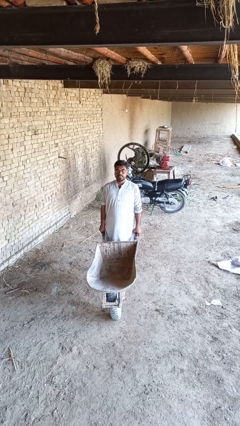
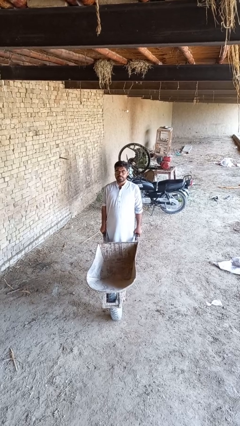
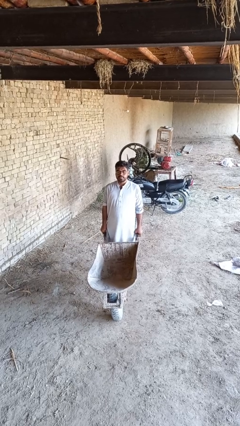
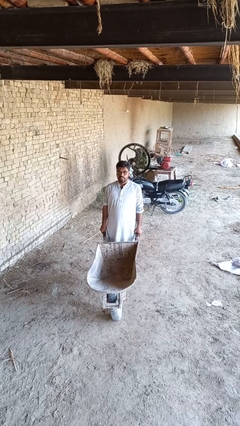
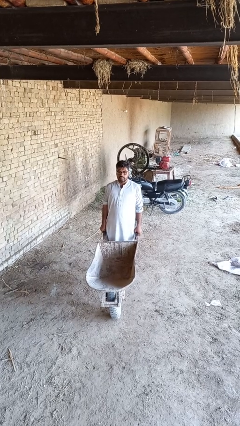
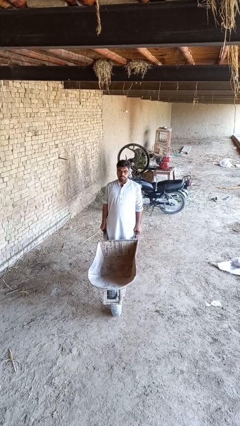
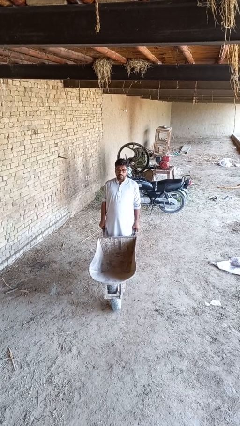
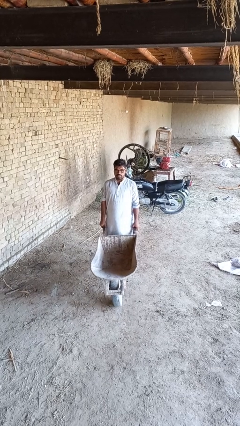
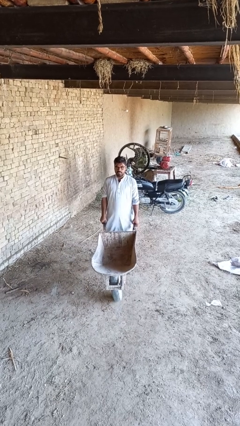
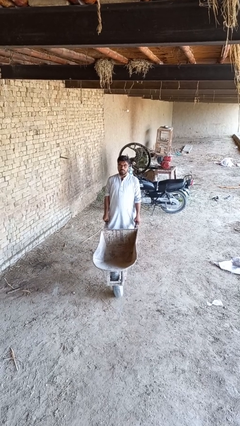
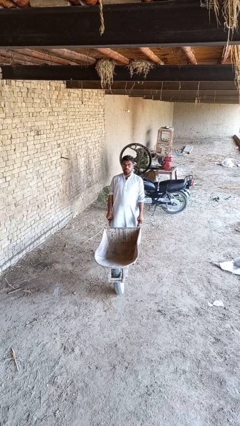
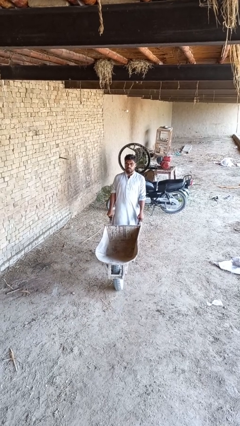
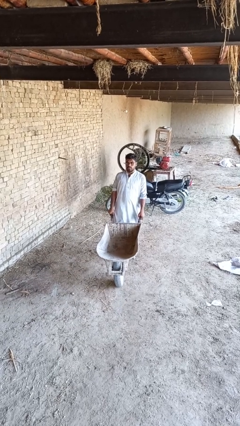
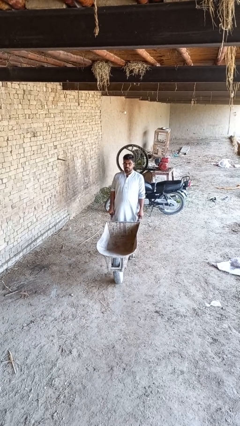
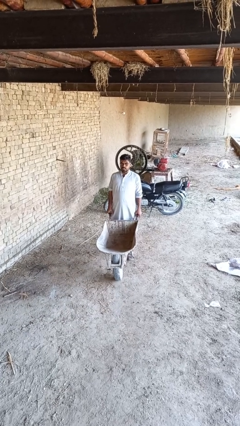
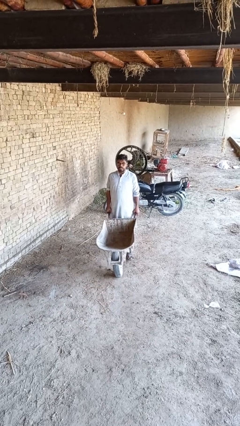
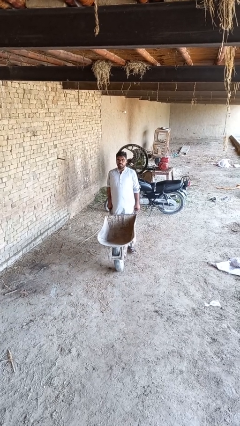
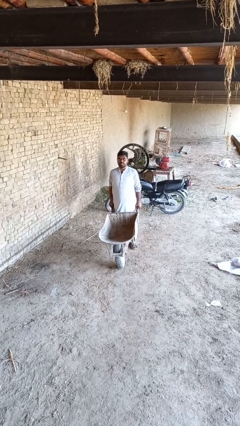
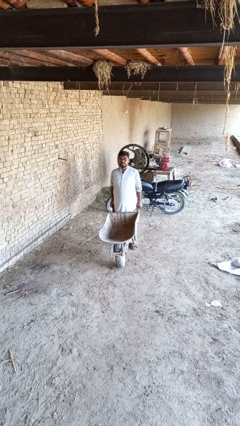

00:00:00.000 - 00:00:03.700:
person pulls wheeled cart

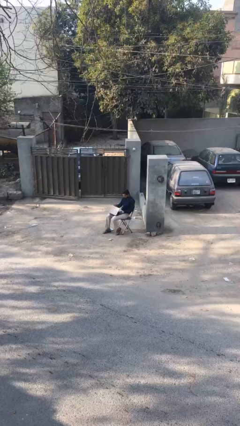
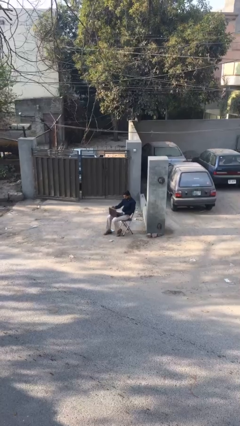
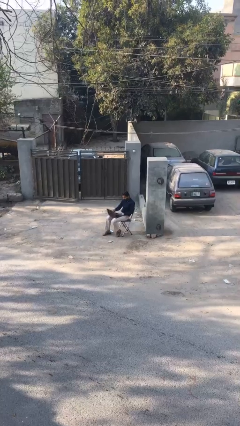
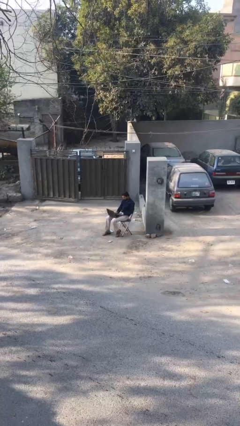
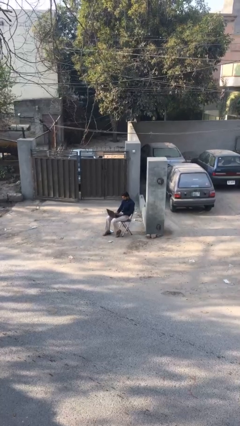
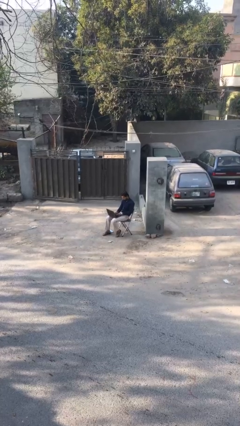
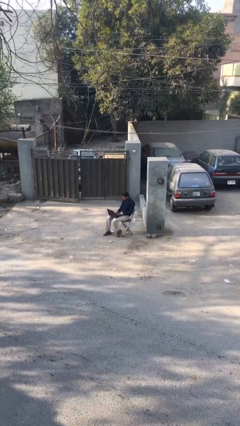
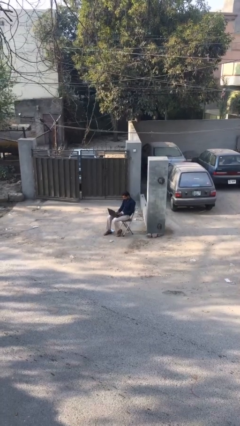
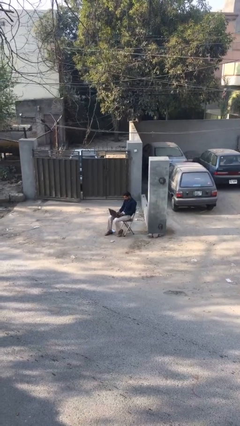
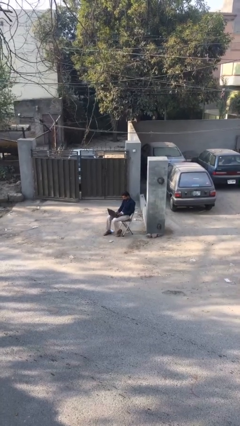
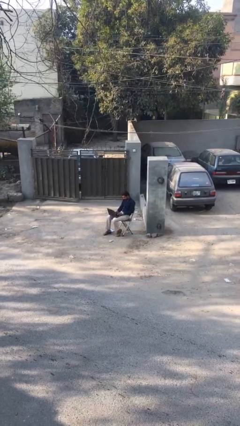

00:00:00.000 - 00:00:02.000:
person interacts with laptop

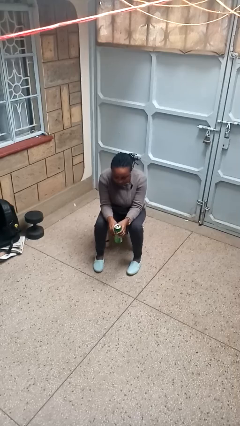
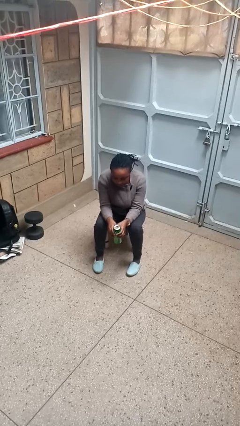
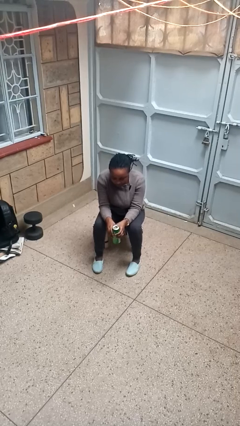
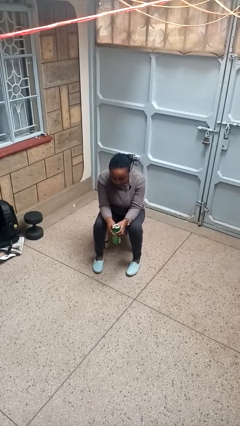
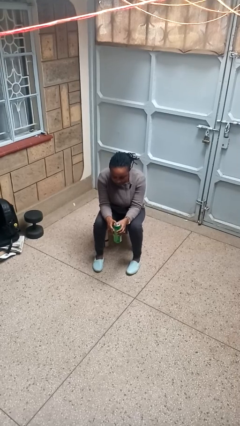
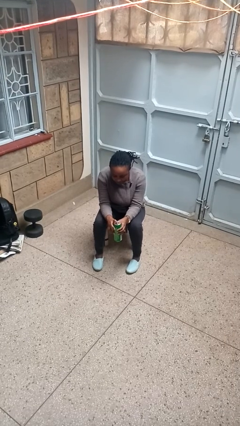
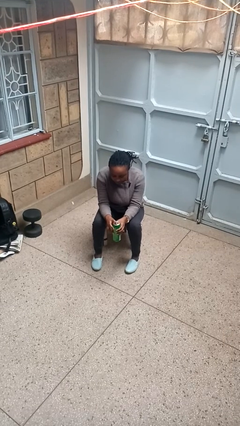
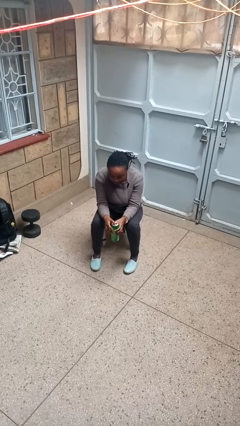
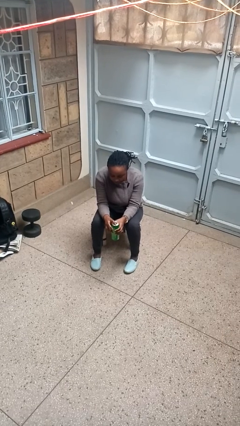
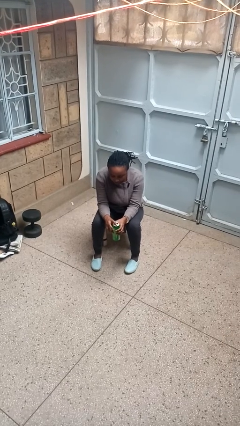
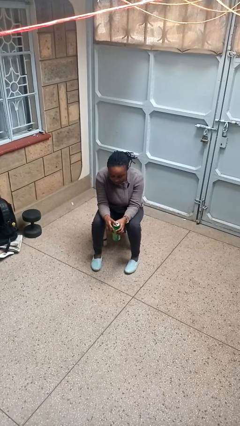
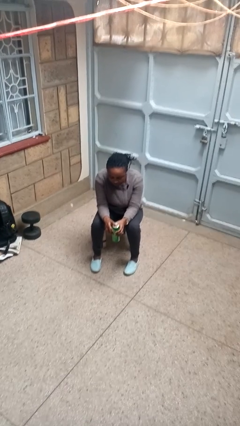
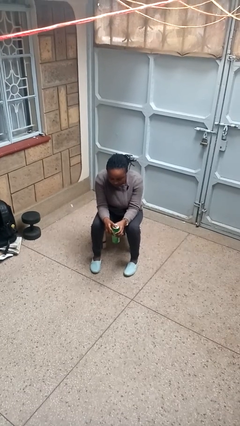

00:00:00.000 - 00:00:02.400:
person opens beverage can

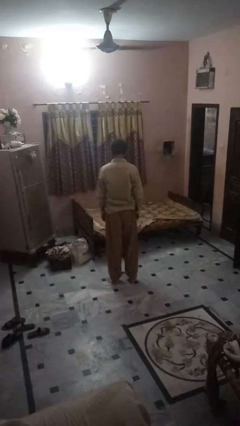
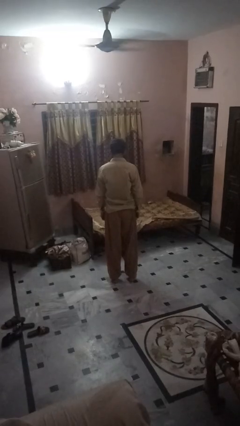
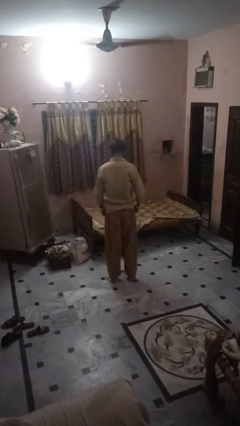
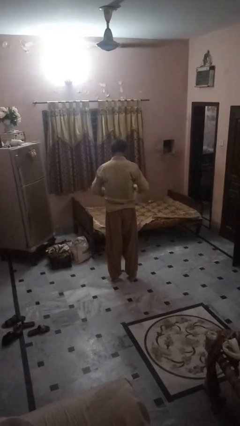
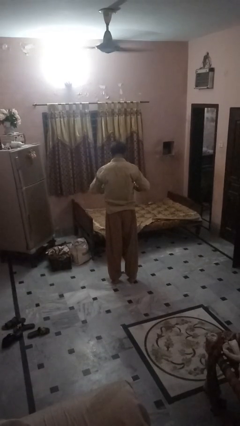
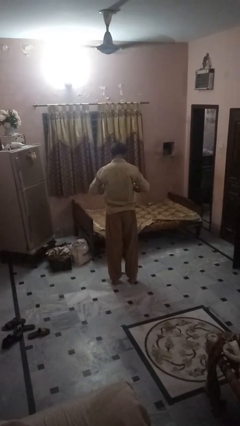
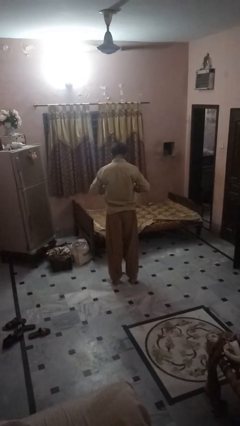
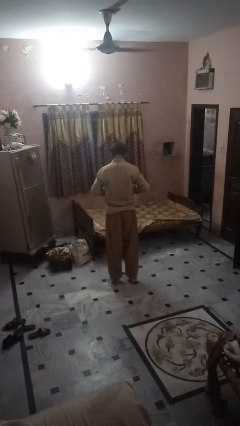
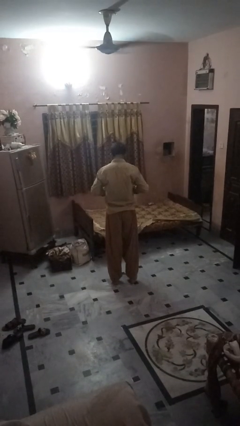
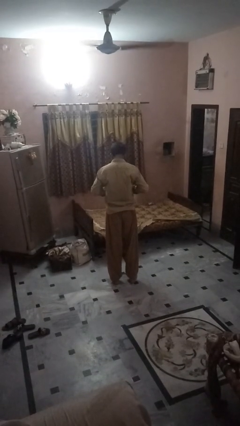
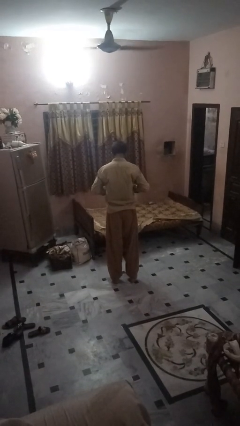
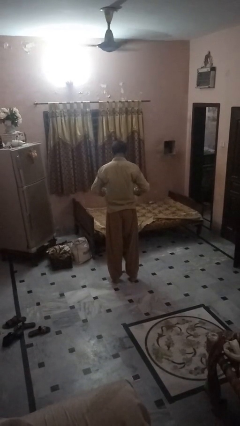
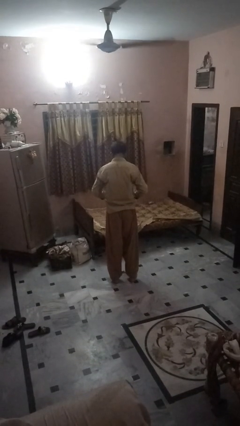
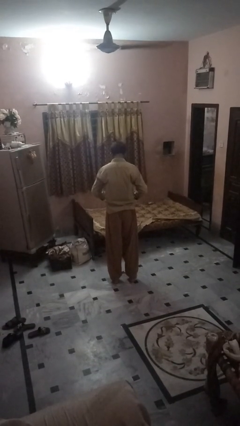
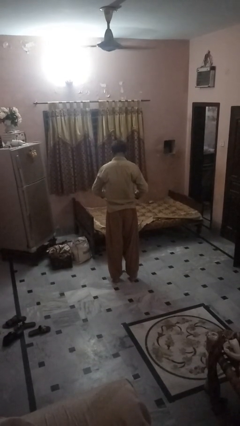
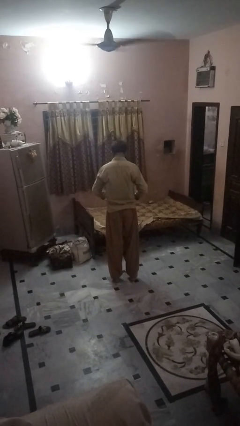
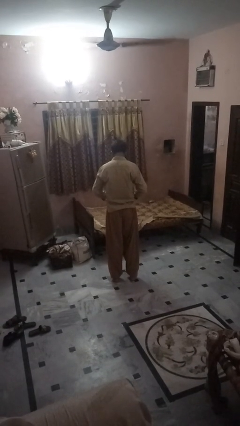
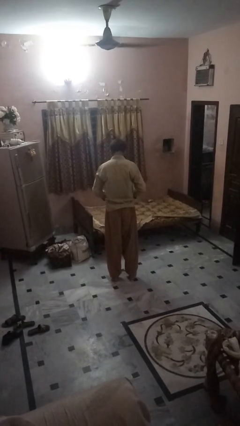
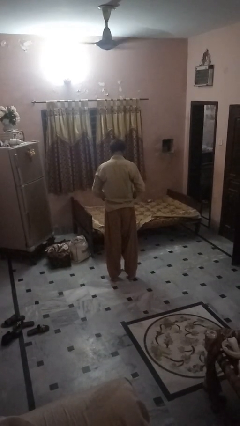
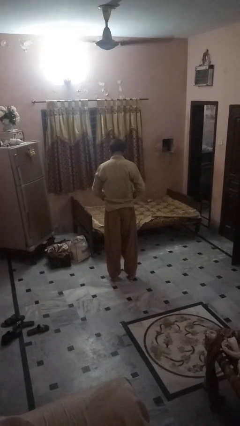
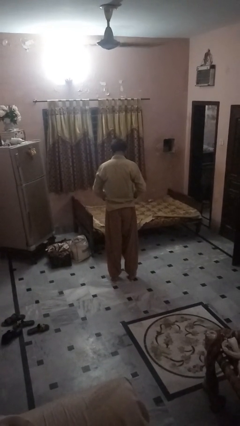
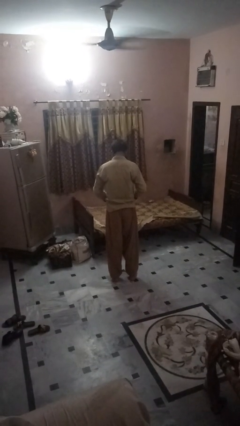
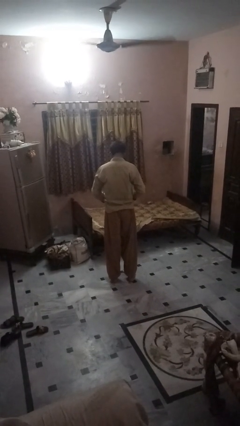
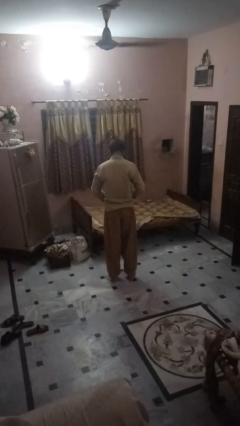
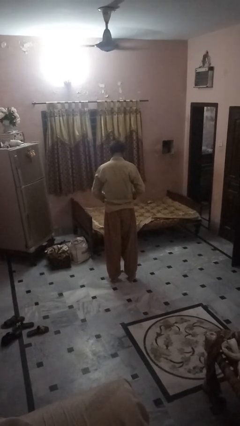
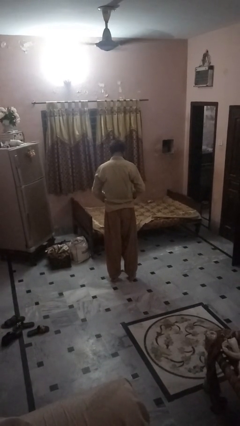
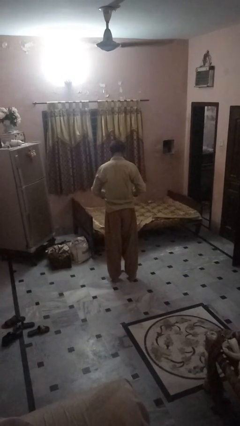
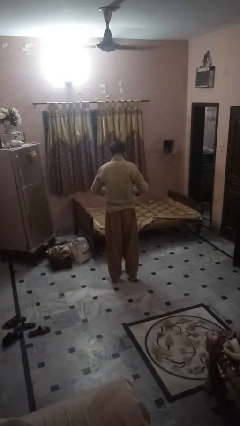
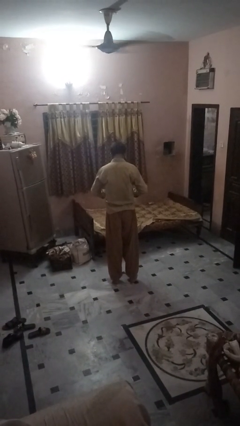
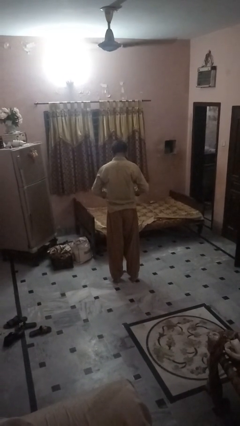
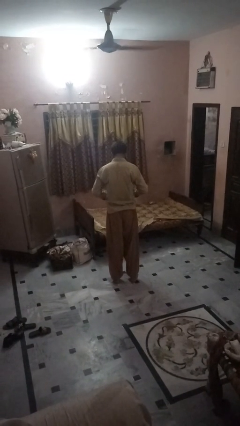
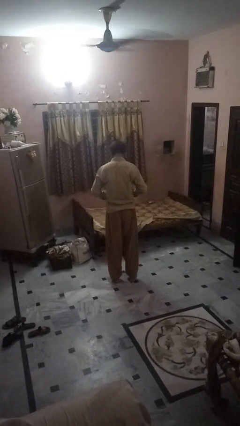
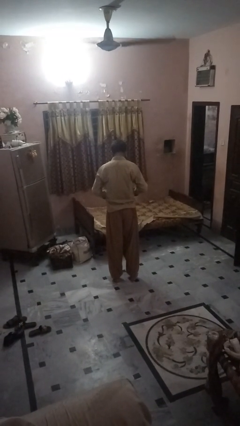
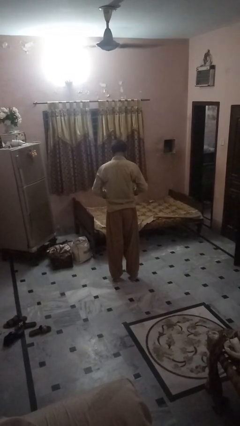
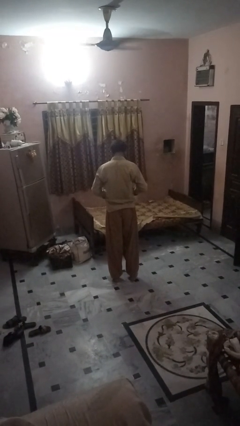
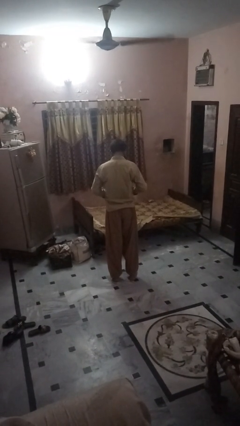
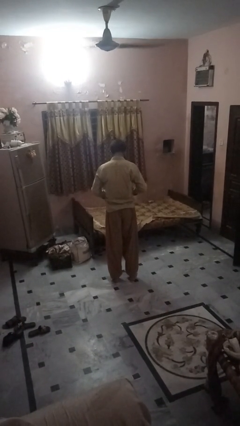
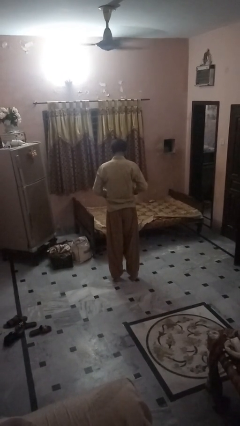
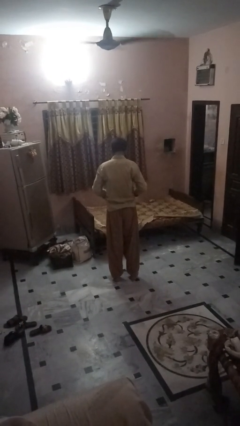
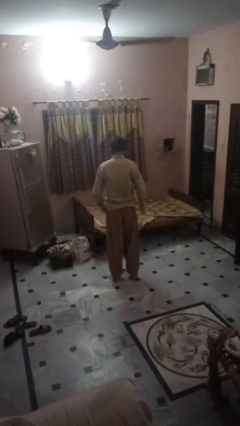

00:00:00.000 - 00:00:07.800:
person buttons shirt

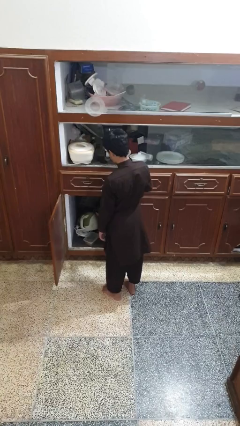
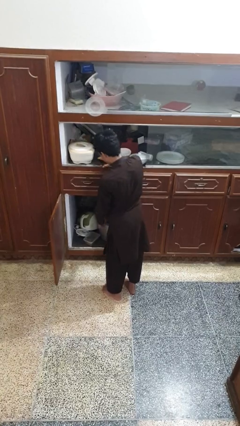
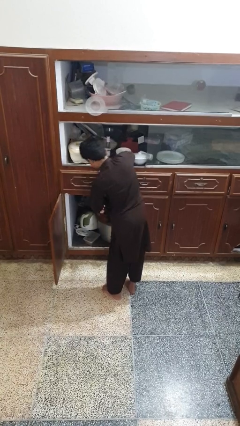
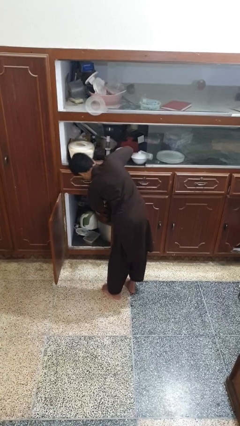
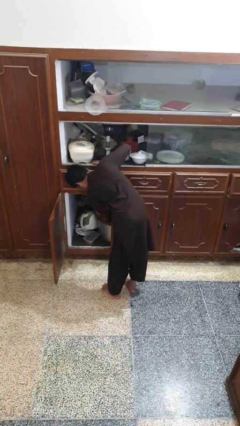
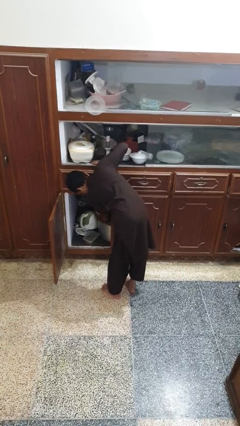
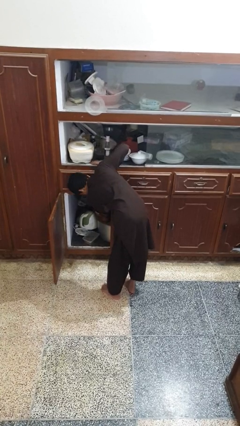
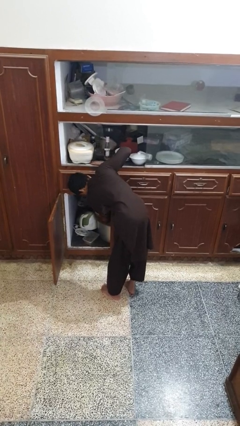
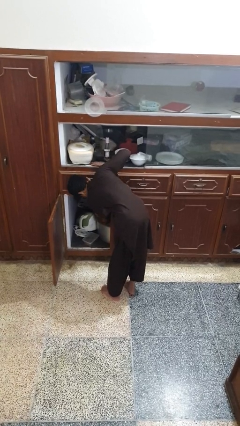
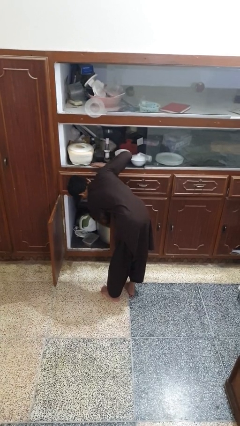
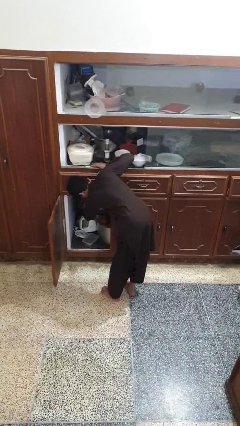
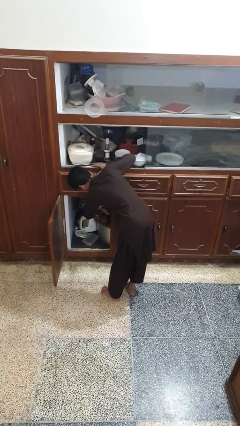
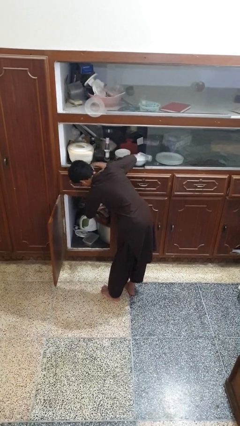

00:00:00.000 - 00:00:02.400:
person takes object from cabinet
